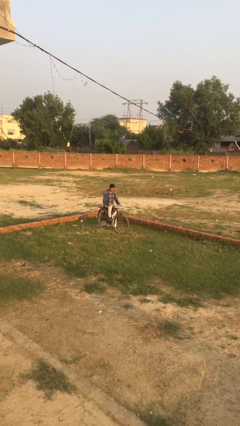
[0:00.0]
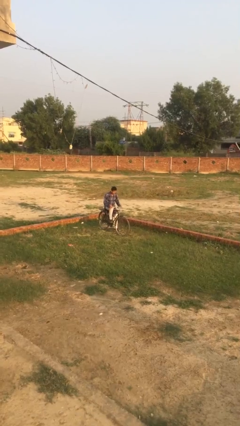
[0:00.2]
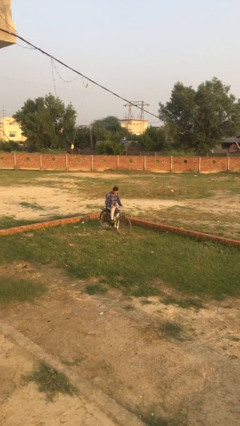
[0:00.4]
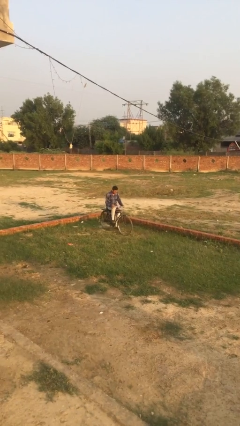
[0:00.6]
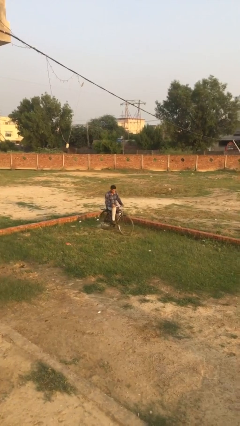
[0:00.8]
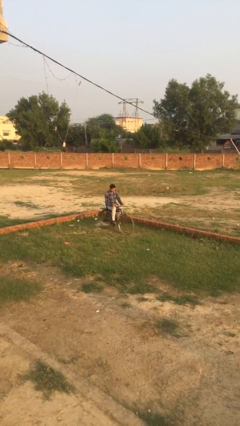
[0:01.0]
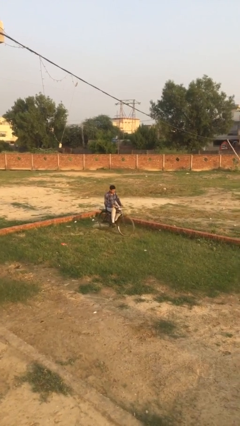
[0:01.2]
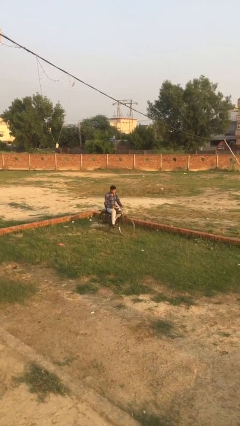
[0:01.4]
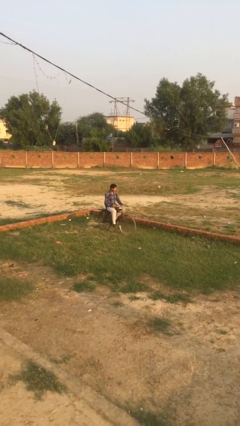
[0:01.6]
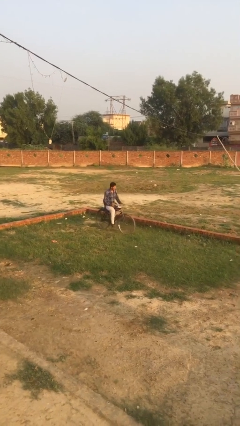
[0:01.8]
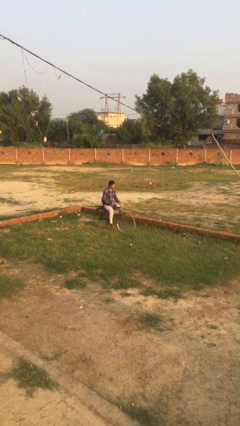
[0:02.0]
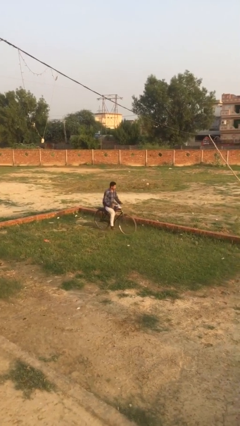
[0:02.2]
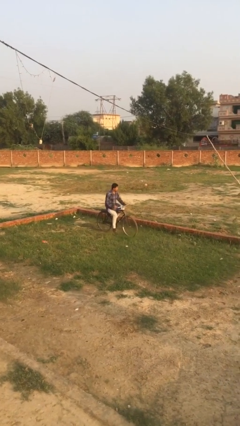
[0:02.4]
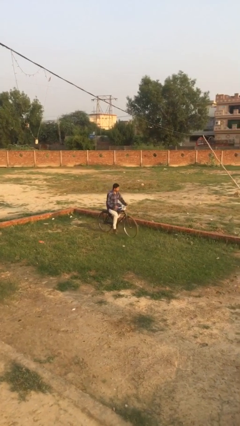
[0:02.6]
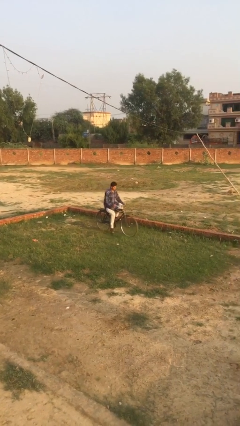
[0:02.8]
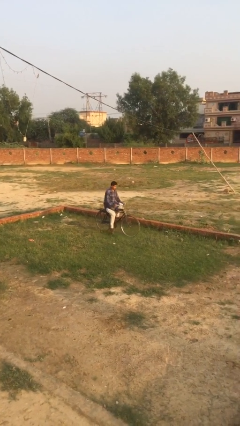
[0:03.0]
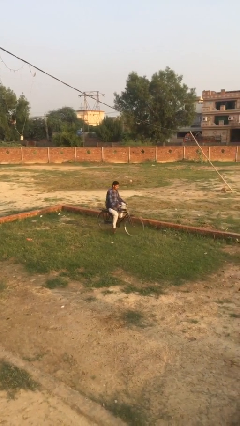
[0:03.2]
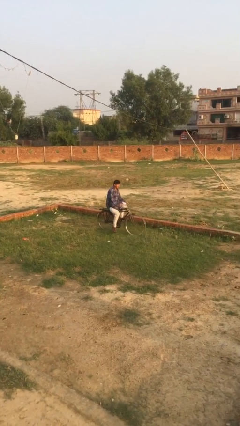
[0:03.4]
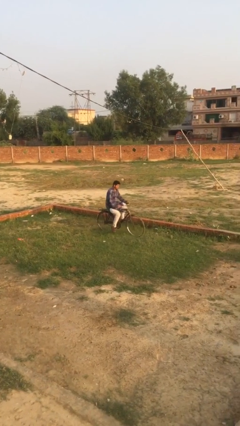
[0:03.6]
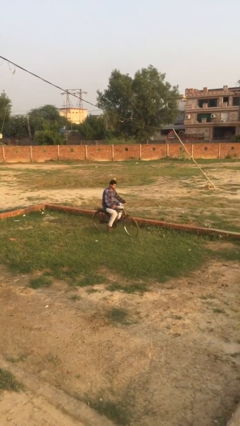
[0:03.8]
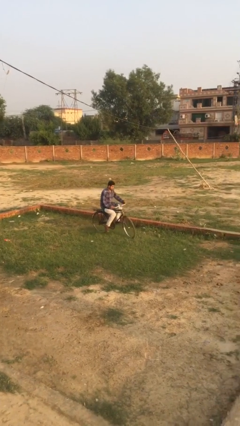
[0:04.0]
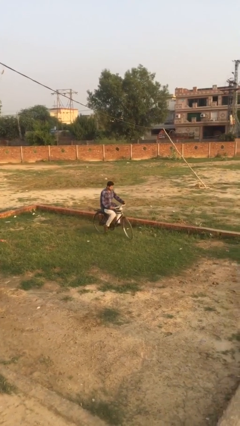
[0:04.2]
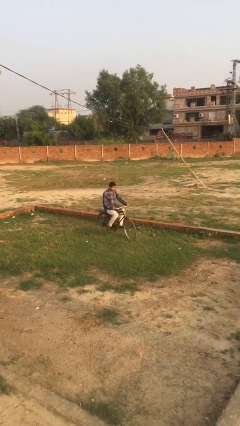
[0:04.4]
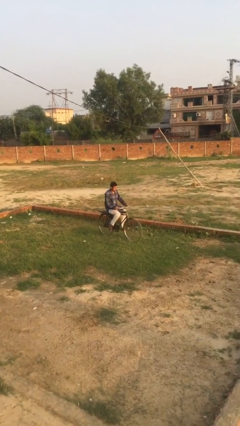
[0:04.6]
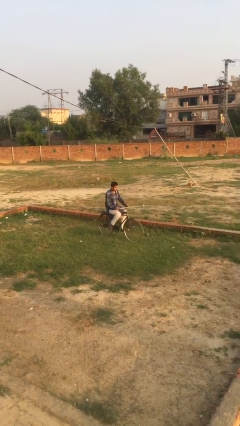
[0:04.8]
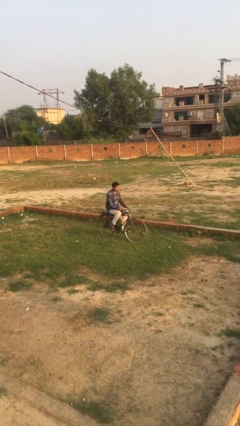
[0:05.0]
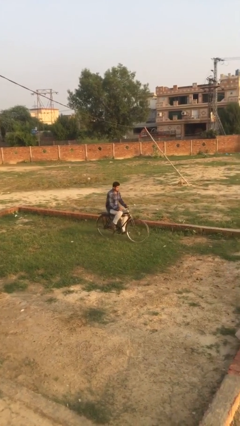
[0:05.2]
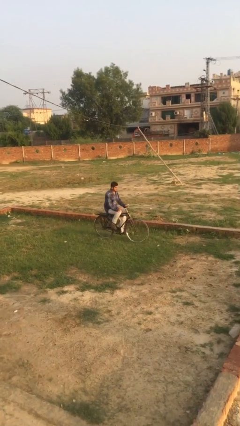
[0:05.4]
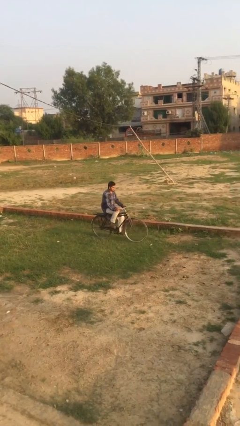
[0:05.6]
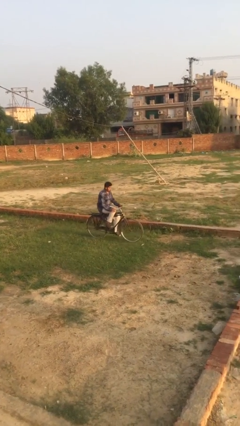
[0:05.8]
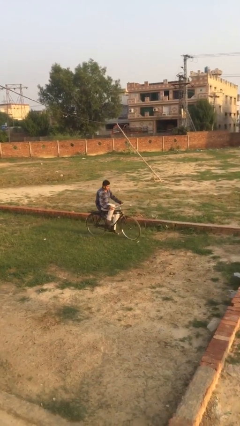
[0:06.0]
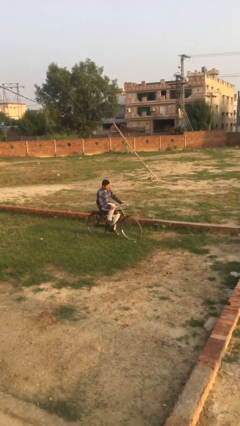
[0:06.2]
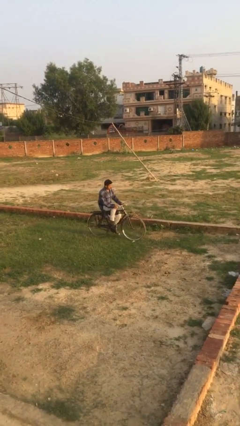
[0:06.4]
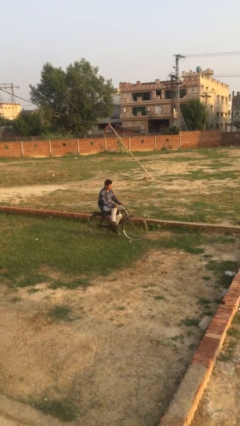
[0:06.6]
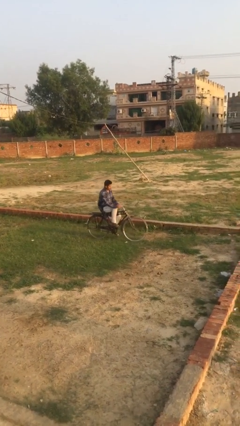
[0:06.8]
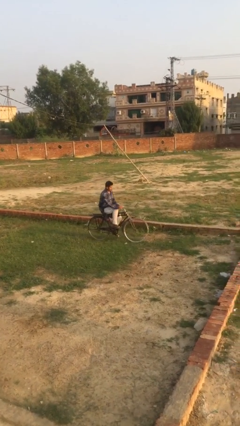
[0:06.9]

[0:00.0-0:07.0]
person rides bicycle

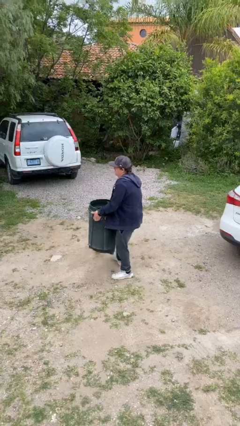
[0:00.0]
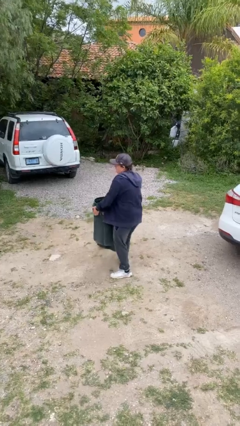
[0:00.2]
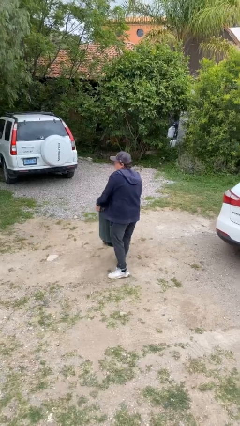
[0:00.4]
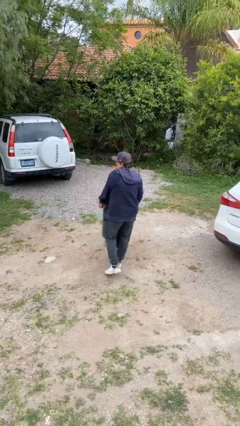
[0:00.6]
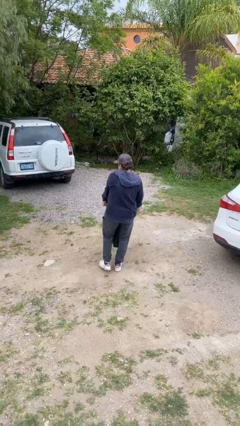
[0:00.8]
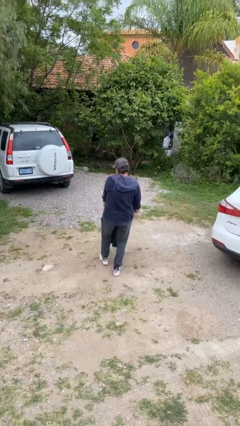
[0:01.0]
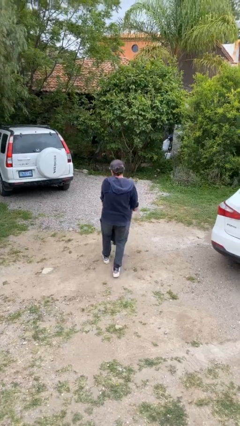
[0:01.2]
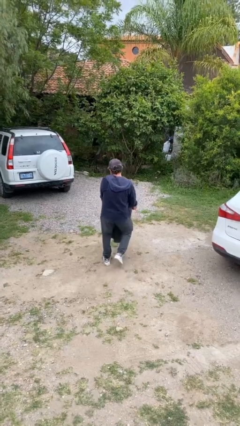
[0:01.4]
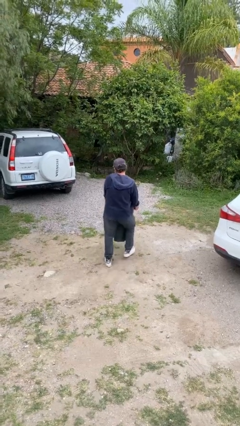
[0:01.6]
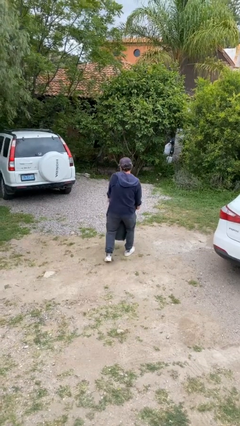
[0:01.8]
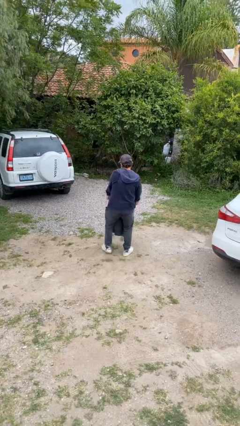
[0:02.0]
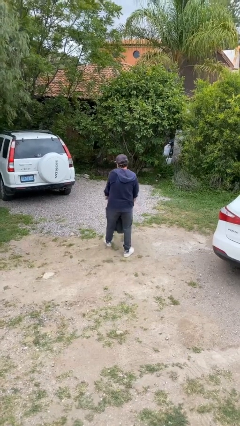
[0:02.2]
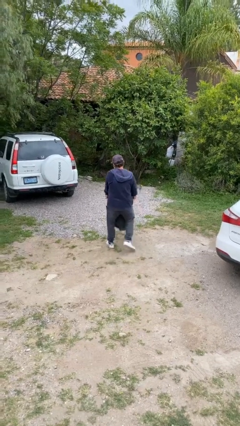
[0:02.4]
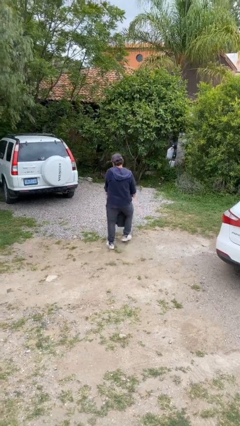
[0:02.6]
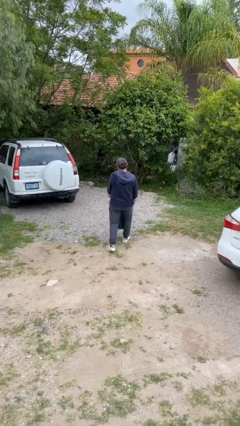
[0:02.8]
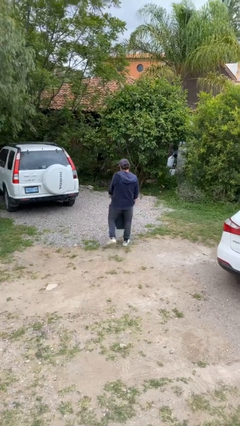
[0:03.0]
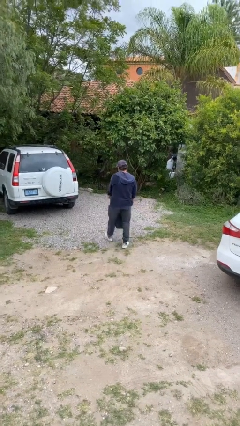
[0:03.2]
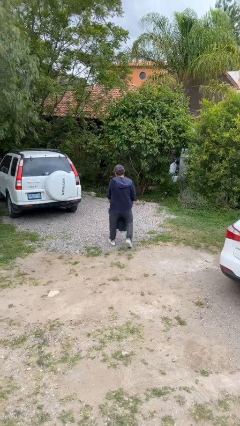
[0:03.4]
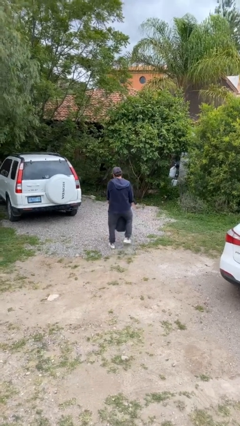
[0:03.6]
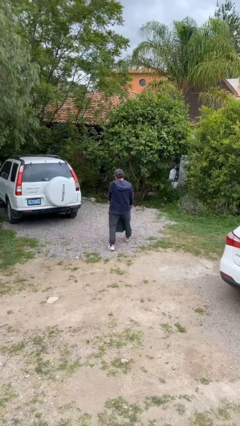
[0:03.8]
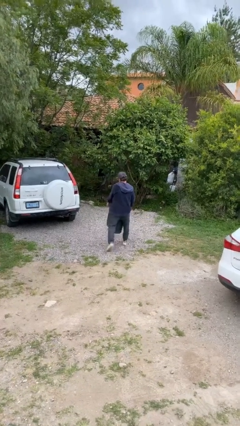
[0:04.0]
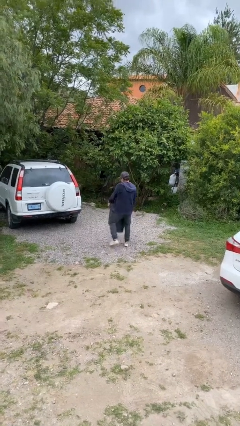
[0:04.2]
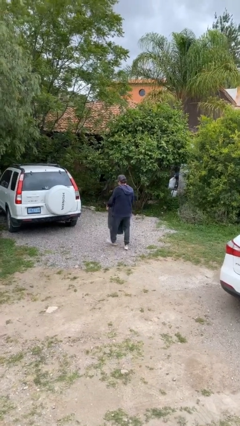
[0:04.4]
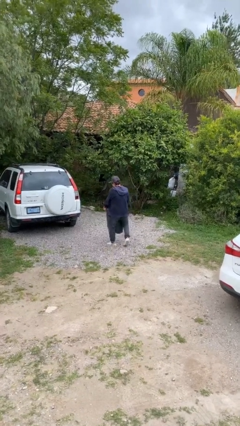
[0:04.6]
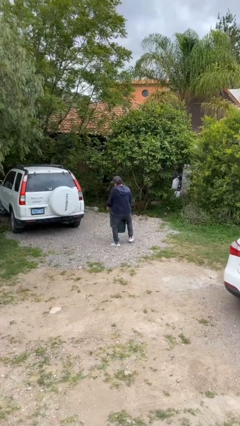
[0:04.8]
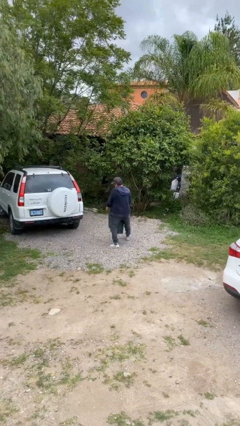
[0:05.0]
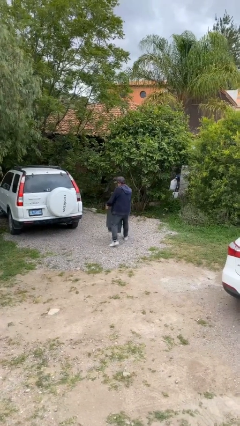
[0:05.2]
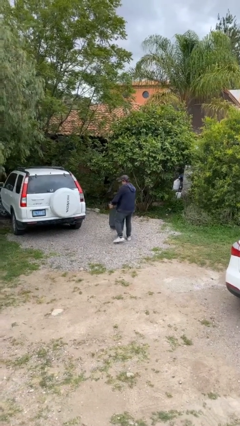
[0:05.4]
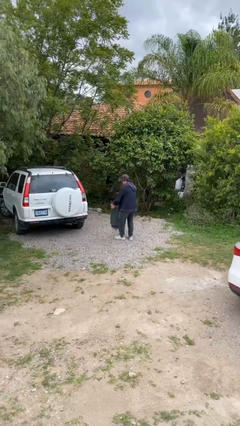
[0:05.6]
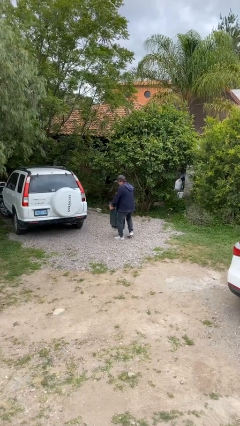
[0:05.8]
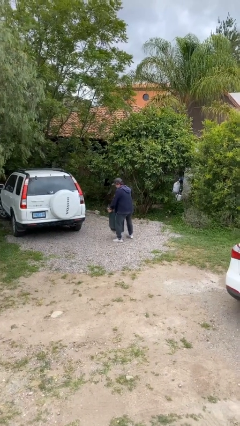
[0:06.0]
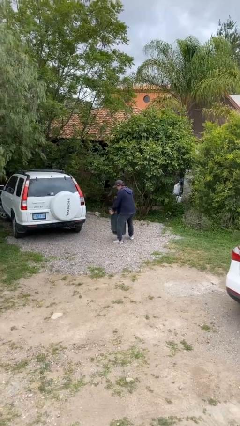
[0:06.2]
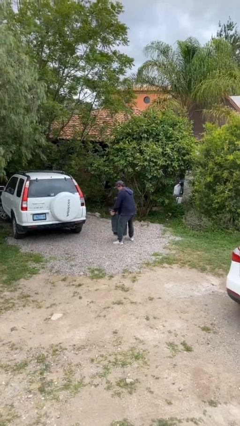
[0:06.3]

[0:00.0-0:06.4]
person carries heavy object

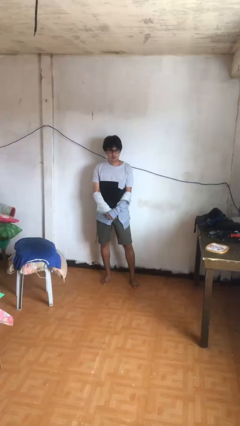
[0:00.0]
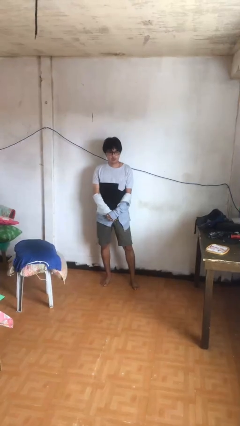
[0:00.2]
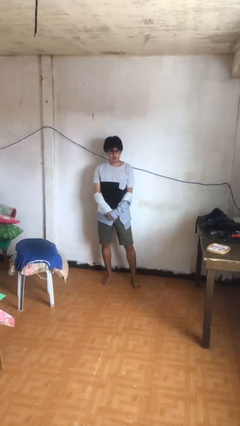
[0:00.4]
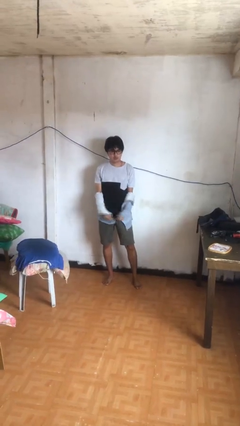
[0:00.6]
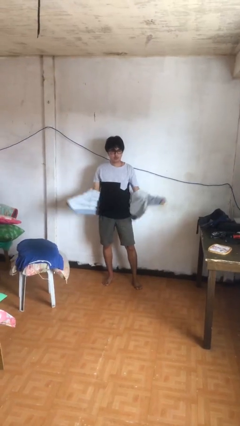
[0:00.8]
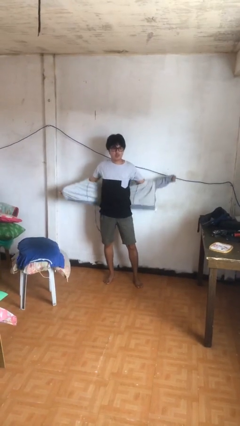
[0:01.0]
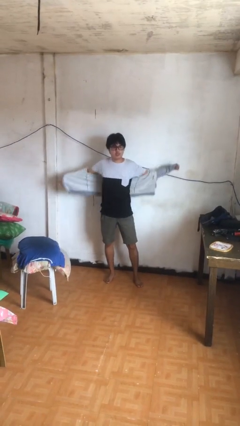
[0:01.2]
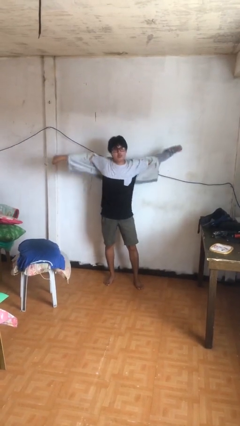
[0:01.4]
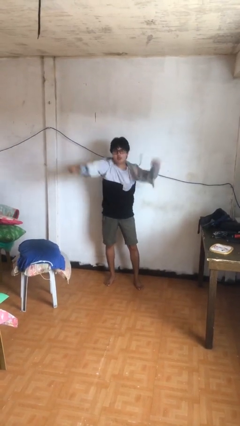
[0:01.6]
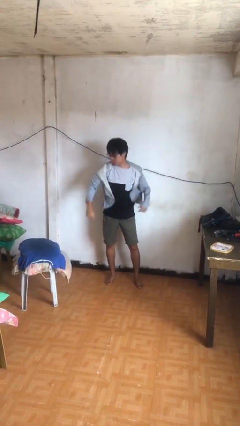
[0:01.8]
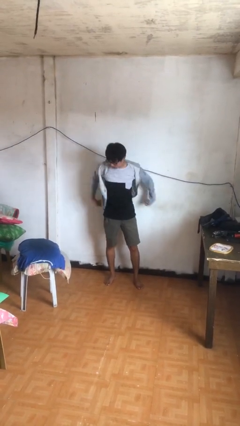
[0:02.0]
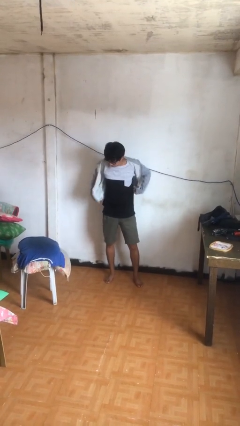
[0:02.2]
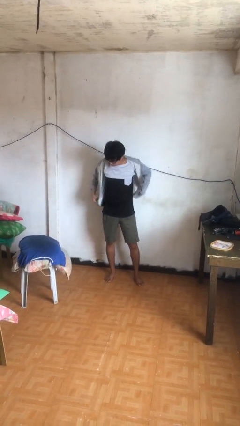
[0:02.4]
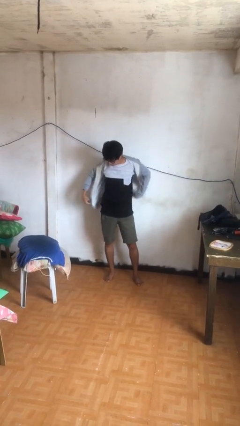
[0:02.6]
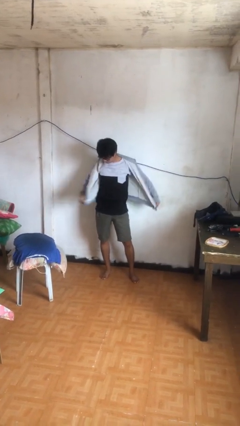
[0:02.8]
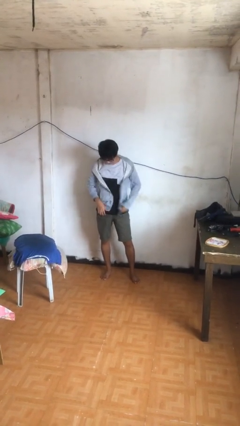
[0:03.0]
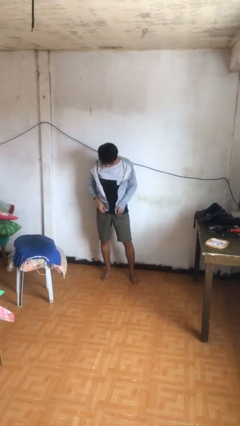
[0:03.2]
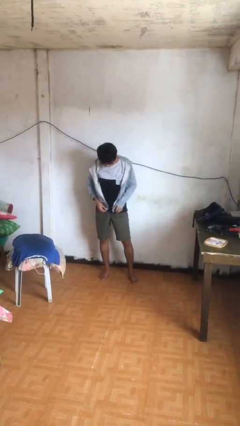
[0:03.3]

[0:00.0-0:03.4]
person puts on jacket

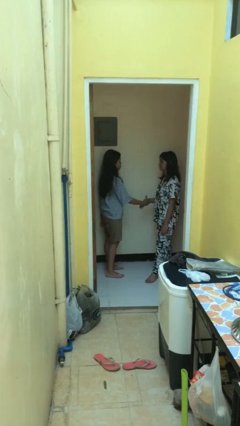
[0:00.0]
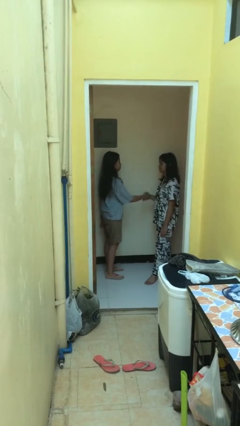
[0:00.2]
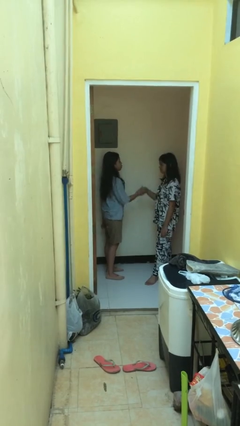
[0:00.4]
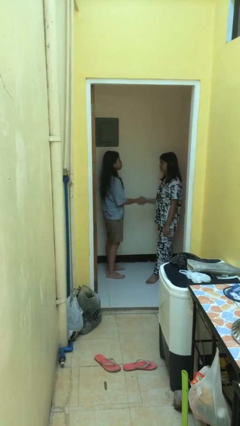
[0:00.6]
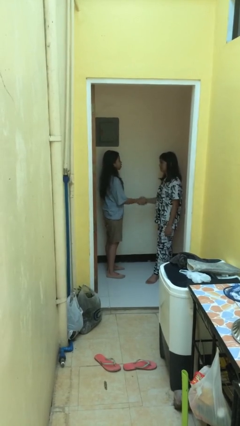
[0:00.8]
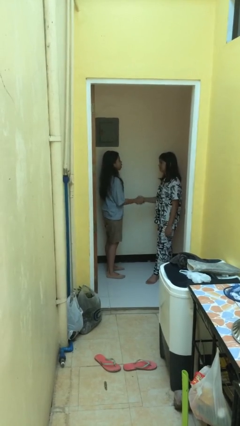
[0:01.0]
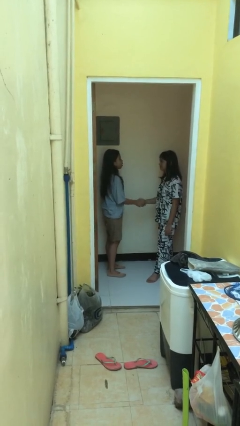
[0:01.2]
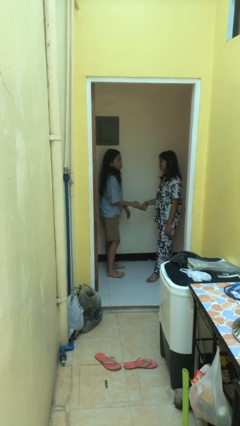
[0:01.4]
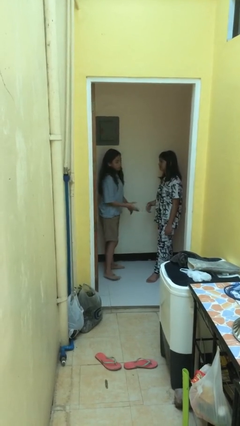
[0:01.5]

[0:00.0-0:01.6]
person shakes hand
